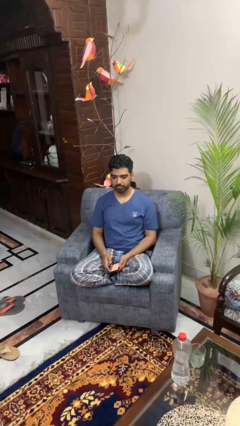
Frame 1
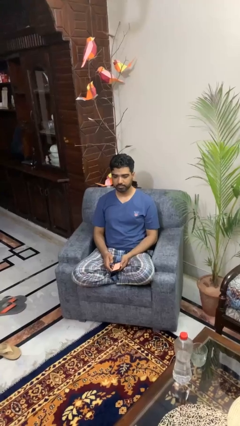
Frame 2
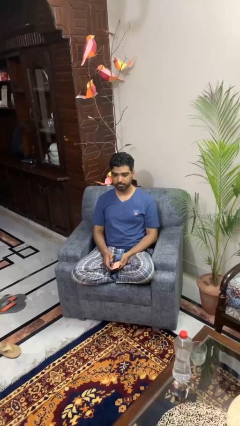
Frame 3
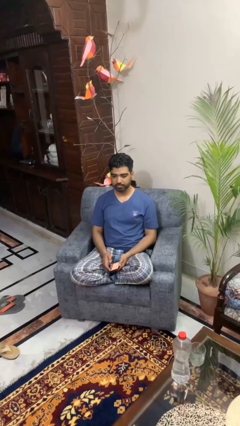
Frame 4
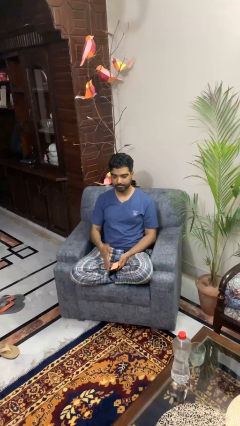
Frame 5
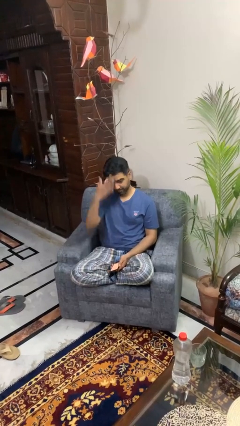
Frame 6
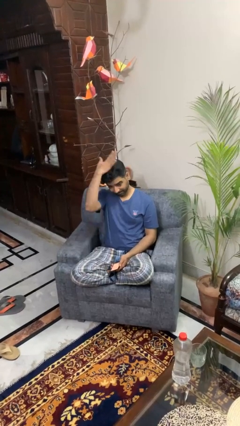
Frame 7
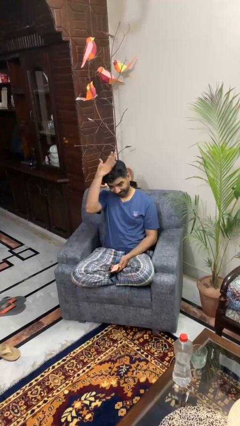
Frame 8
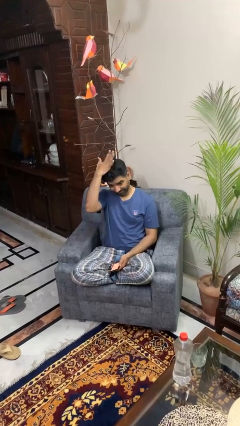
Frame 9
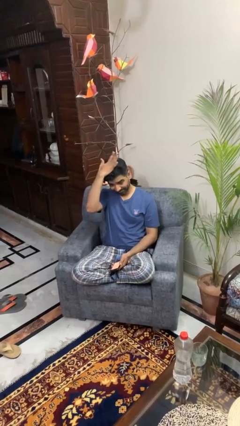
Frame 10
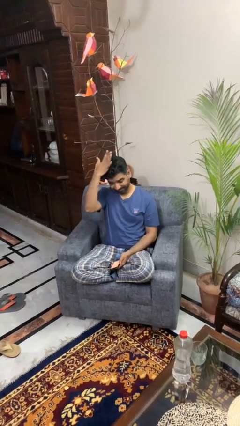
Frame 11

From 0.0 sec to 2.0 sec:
person pats head

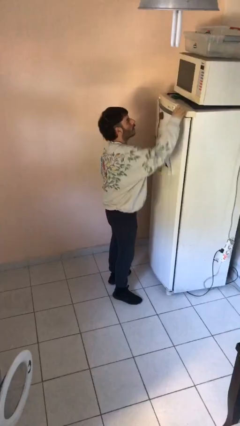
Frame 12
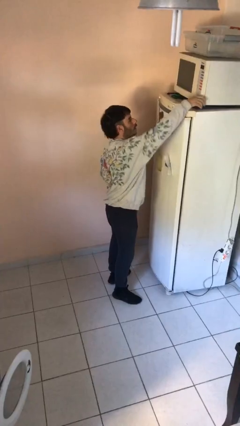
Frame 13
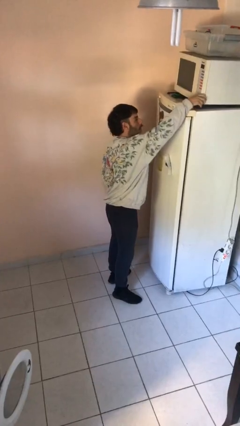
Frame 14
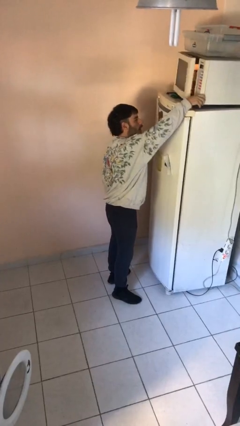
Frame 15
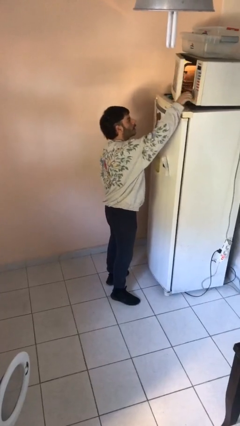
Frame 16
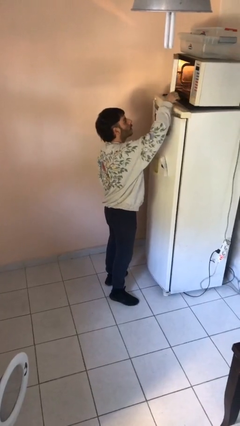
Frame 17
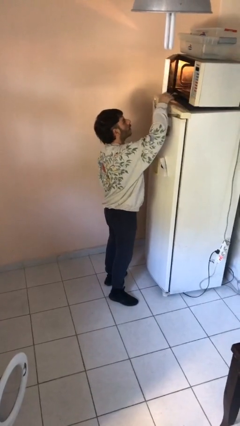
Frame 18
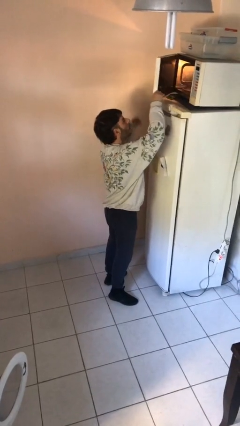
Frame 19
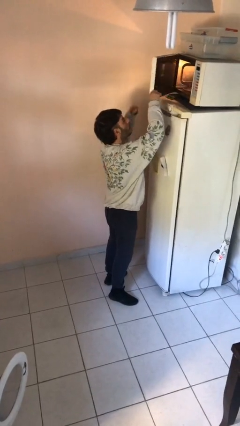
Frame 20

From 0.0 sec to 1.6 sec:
person opens microwave

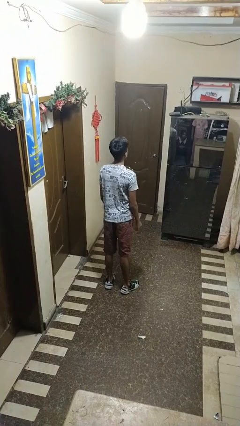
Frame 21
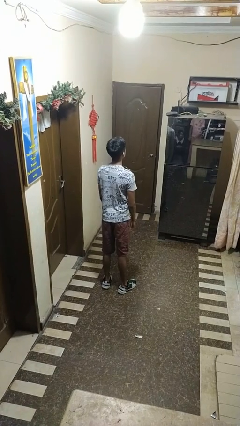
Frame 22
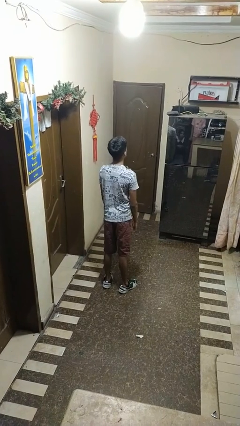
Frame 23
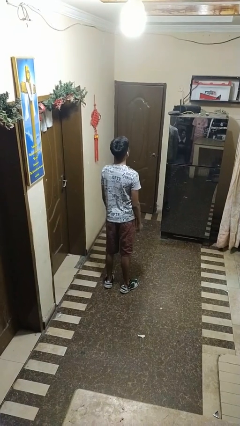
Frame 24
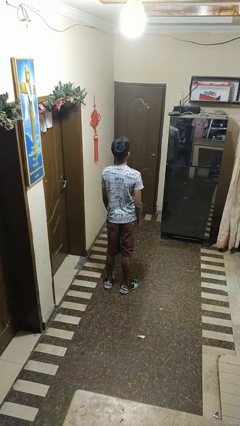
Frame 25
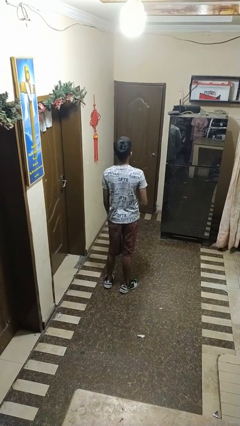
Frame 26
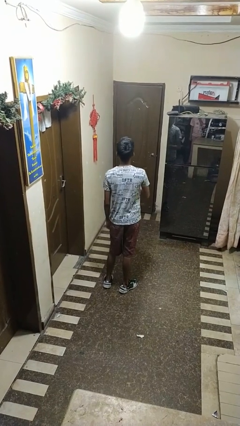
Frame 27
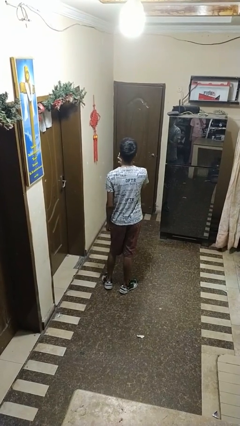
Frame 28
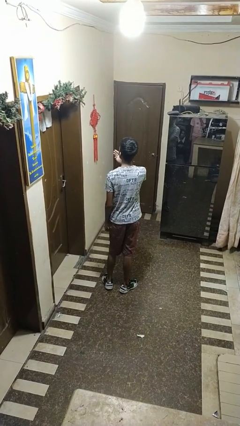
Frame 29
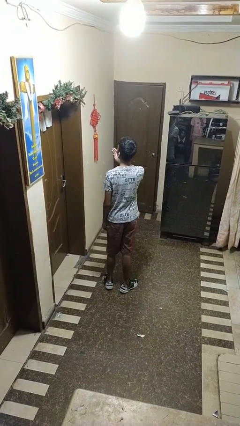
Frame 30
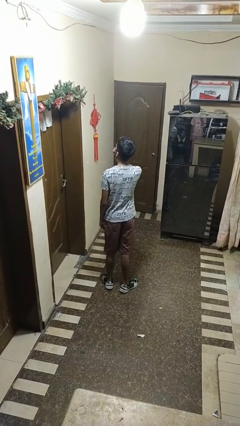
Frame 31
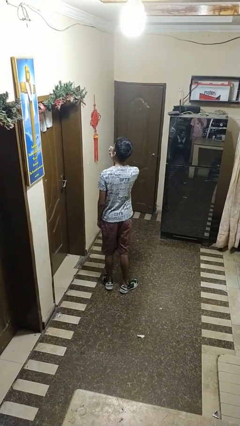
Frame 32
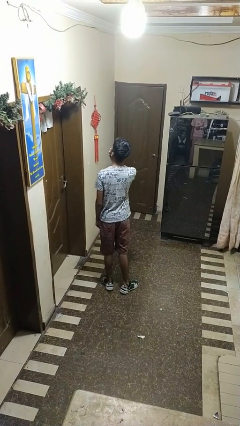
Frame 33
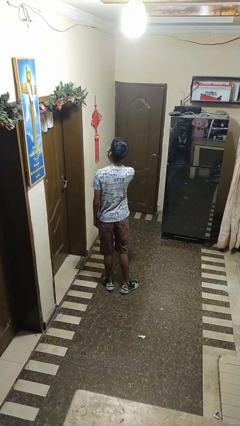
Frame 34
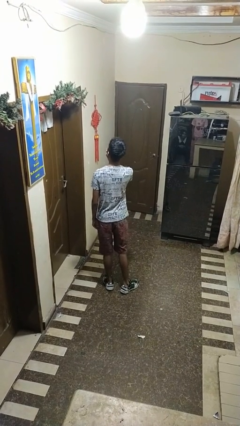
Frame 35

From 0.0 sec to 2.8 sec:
person yawns

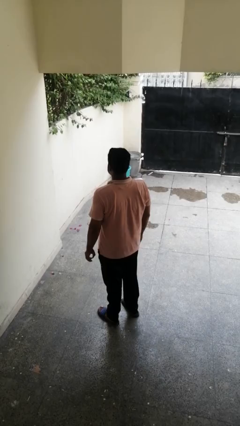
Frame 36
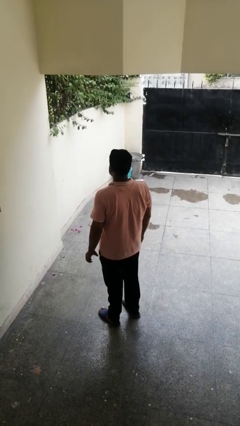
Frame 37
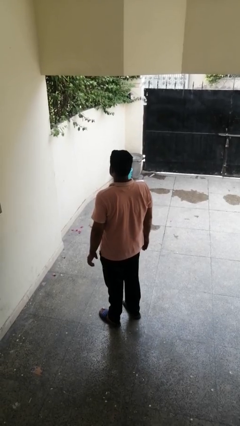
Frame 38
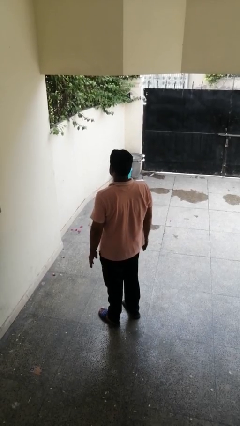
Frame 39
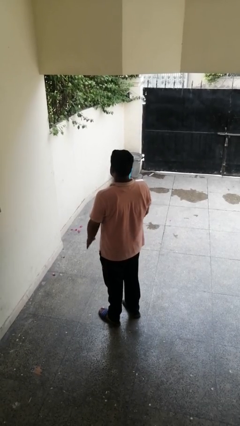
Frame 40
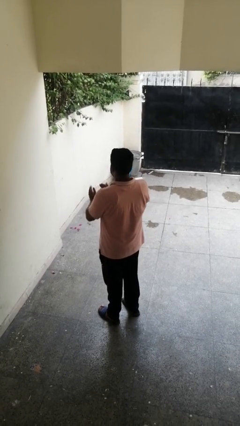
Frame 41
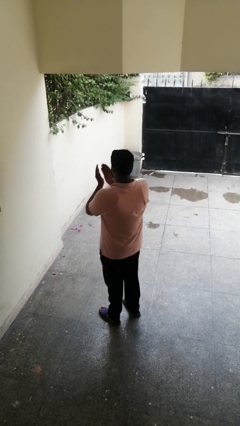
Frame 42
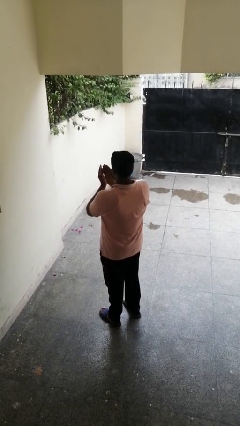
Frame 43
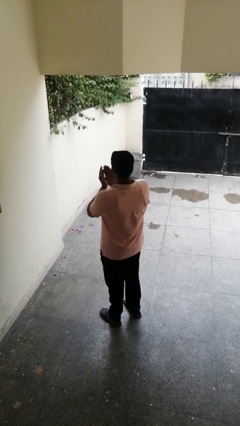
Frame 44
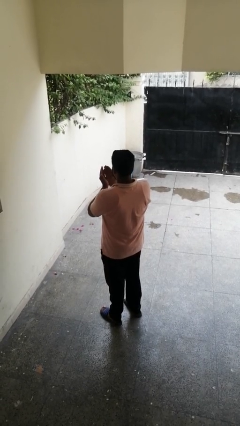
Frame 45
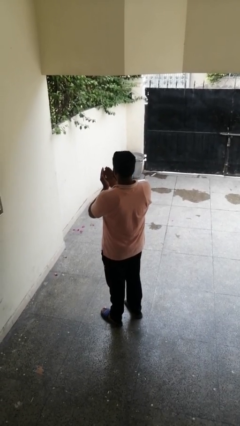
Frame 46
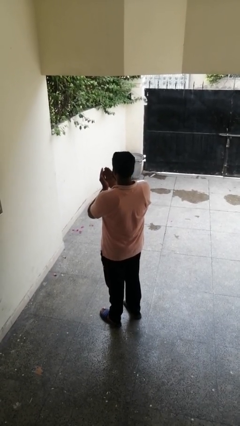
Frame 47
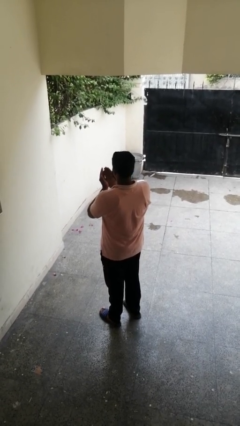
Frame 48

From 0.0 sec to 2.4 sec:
person prays

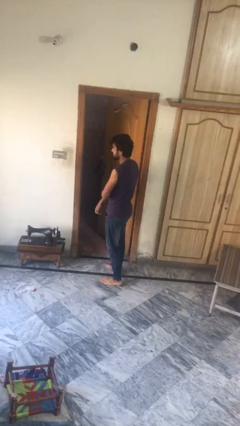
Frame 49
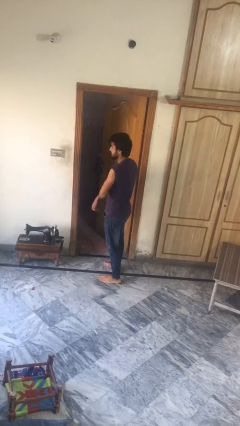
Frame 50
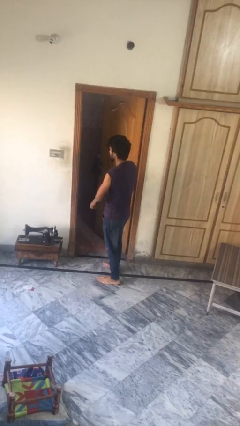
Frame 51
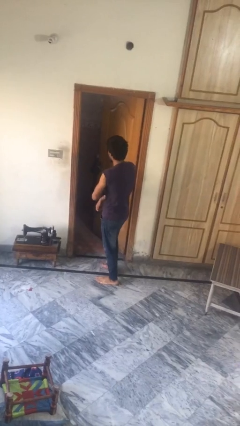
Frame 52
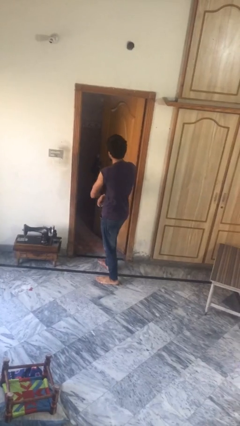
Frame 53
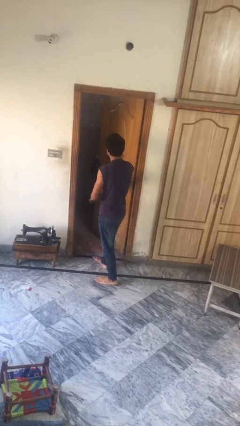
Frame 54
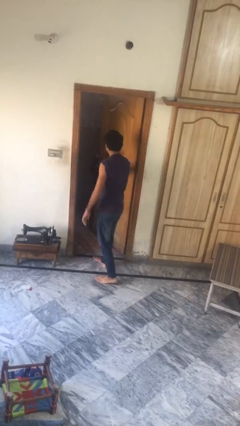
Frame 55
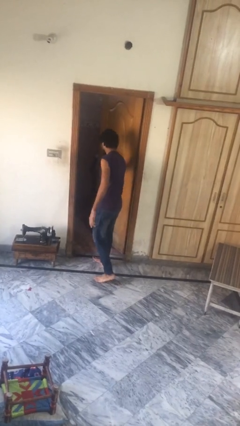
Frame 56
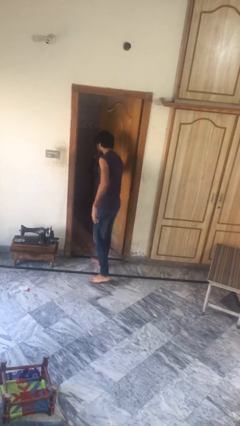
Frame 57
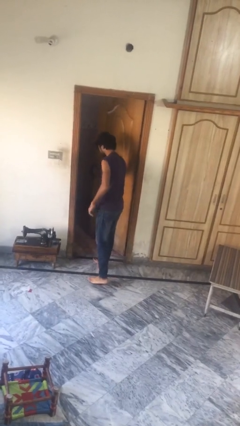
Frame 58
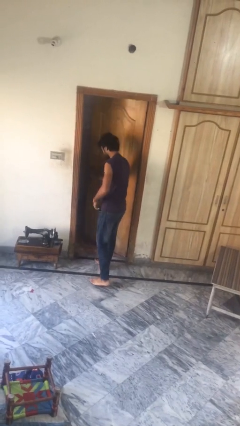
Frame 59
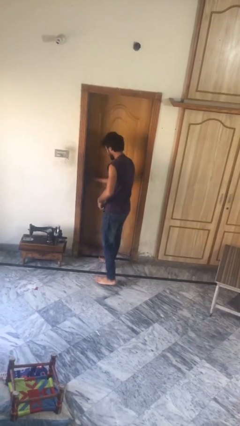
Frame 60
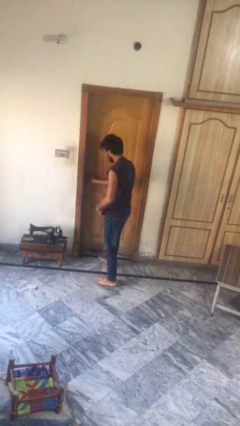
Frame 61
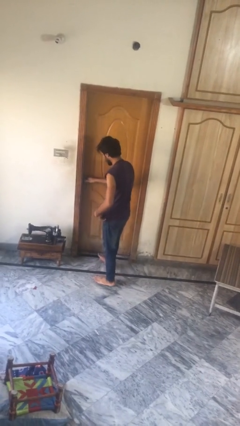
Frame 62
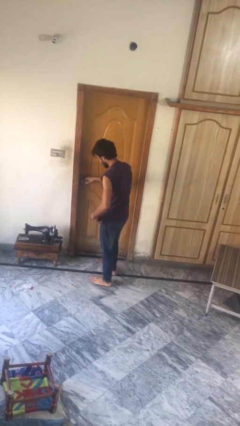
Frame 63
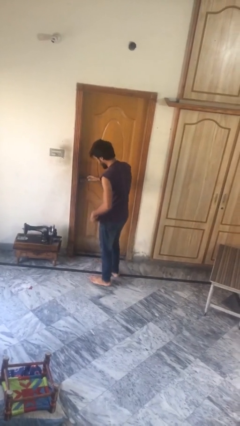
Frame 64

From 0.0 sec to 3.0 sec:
person closes facility door

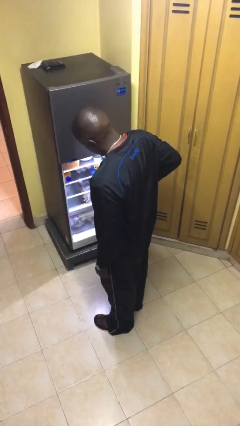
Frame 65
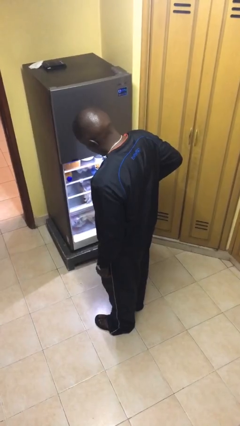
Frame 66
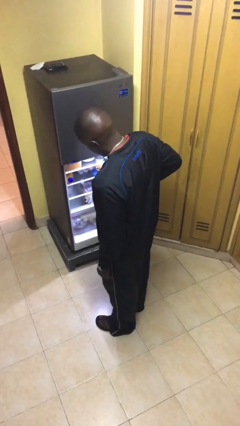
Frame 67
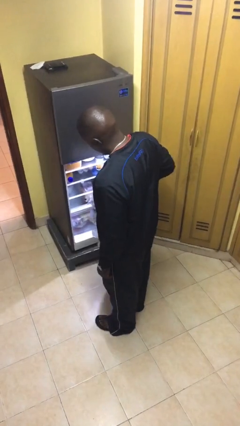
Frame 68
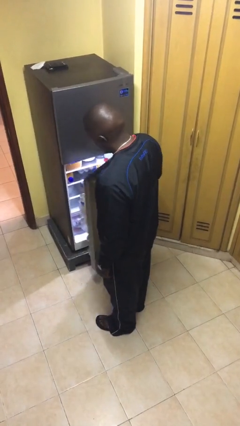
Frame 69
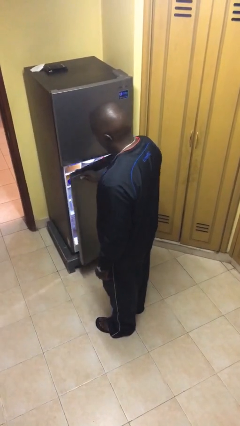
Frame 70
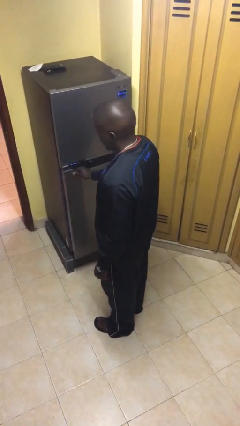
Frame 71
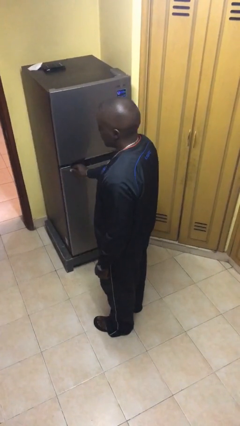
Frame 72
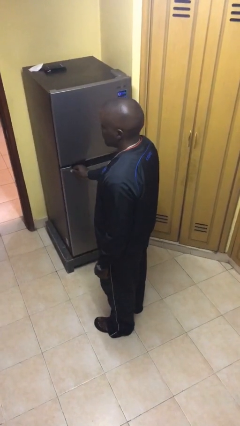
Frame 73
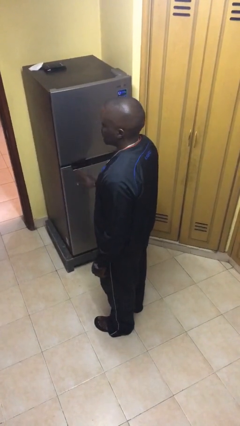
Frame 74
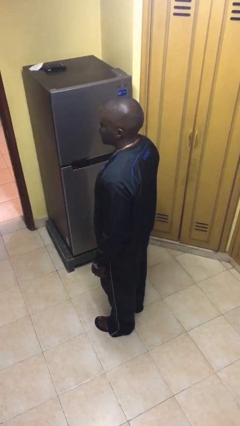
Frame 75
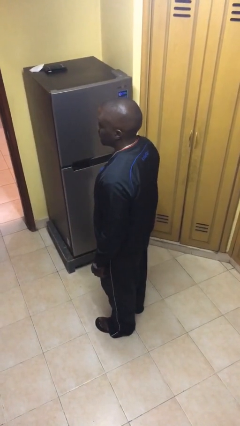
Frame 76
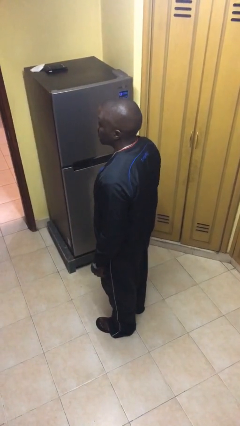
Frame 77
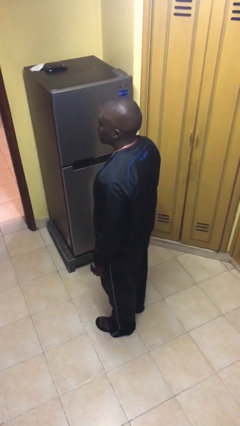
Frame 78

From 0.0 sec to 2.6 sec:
person closes refrigerator

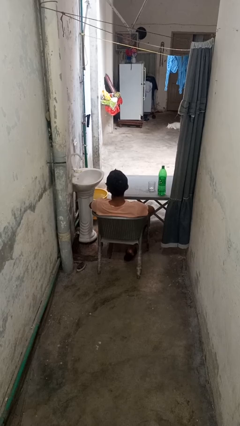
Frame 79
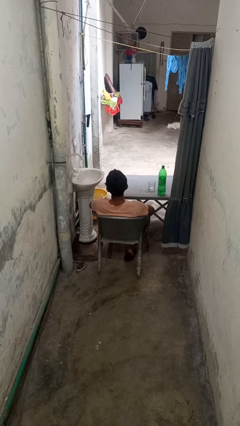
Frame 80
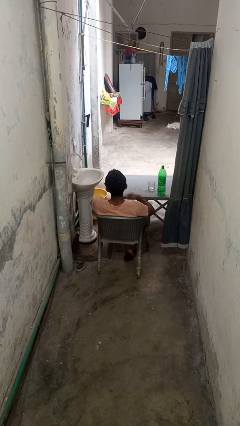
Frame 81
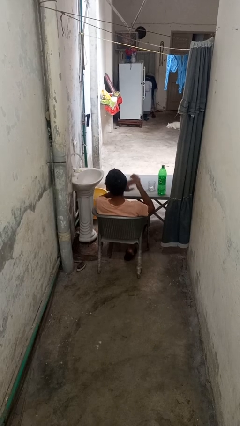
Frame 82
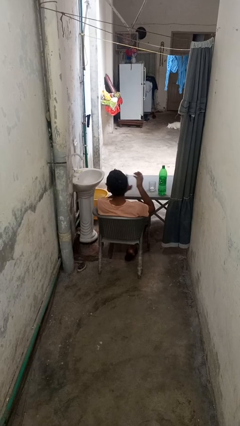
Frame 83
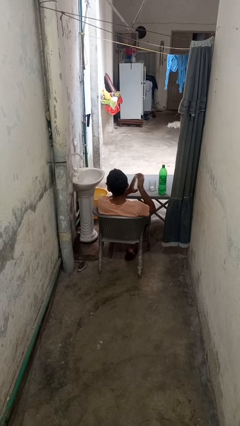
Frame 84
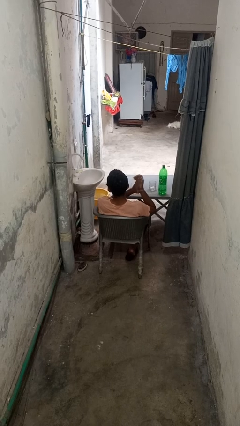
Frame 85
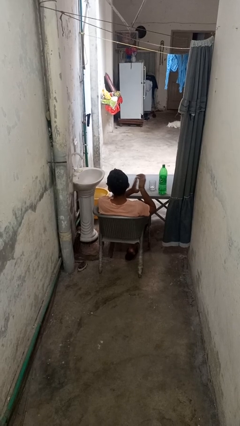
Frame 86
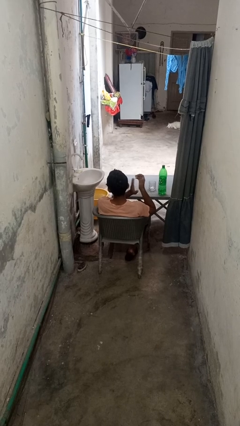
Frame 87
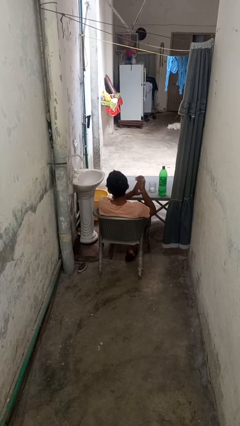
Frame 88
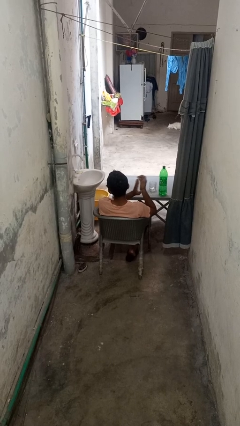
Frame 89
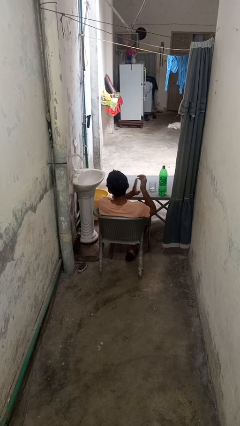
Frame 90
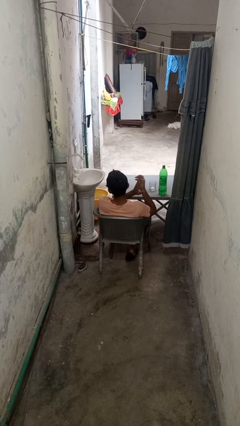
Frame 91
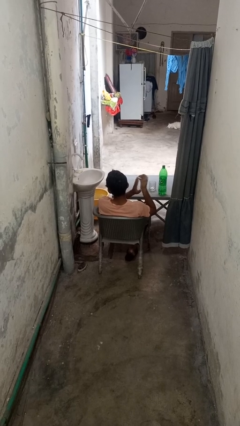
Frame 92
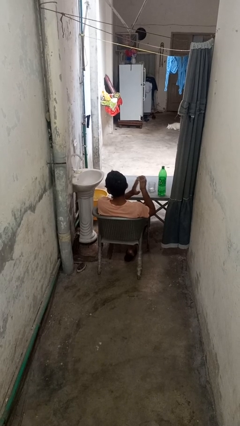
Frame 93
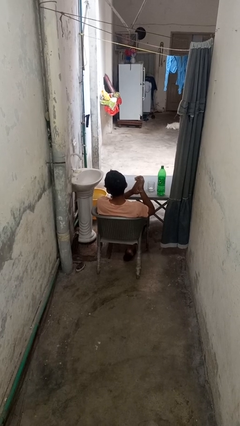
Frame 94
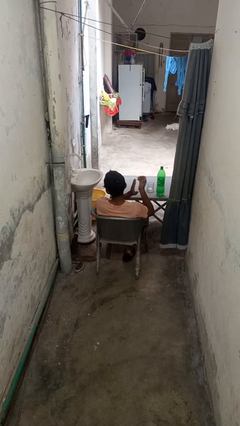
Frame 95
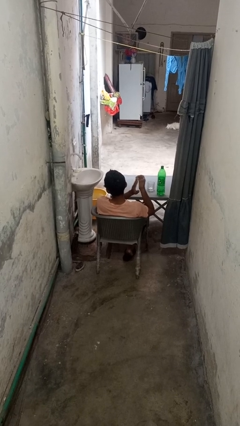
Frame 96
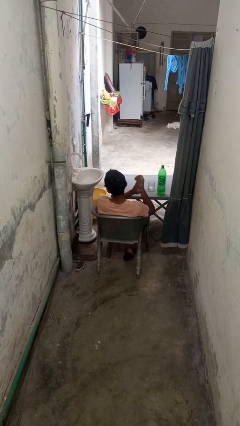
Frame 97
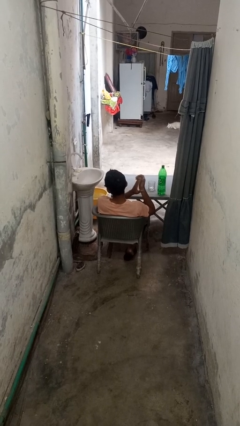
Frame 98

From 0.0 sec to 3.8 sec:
person claps hands
